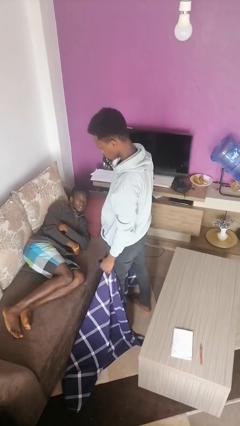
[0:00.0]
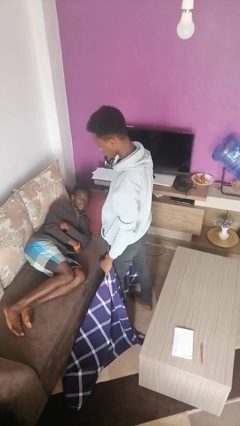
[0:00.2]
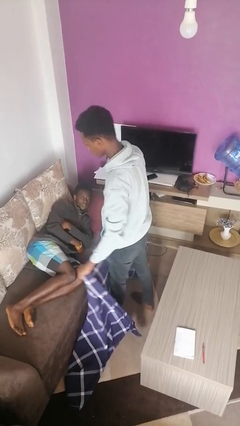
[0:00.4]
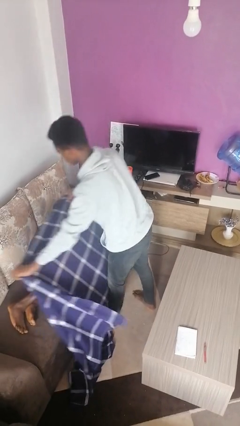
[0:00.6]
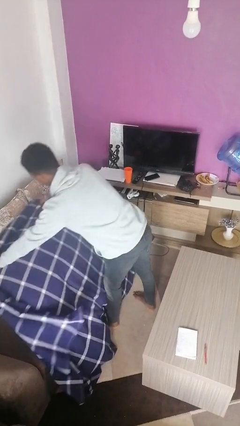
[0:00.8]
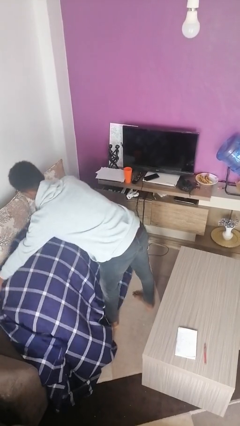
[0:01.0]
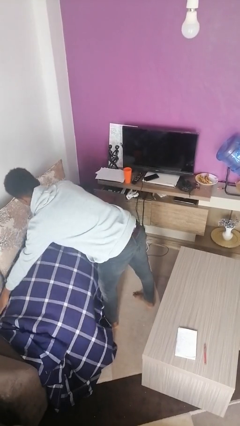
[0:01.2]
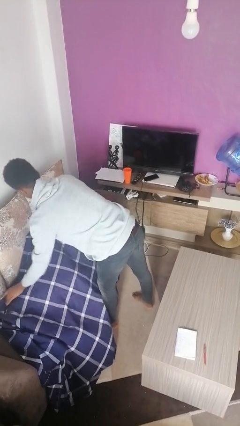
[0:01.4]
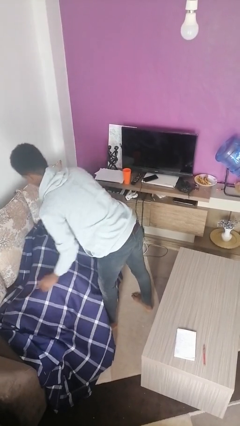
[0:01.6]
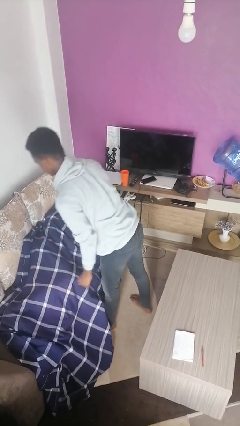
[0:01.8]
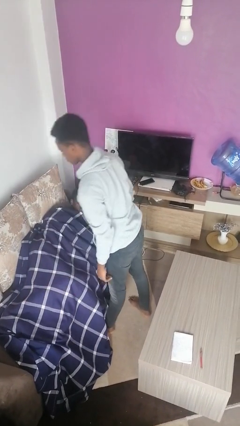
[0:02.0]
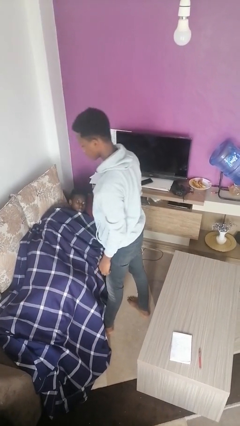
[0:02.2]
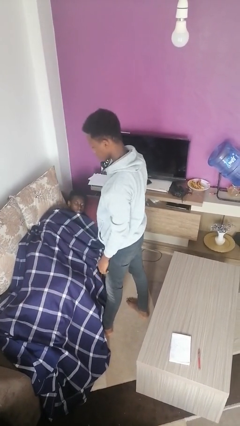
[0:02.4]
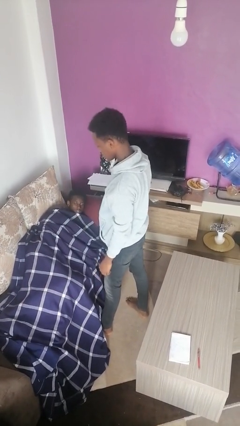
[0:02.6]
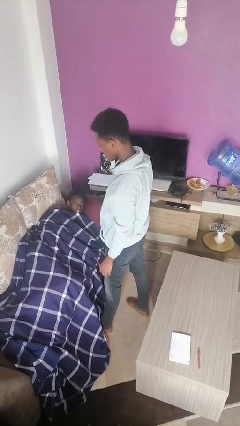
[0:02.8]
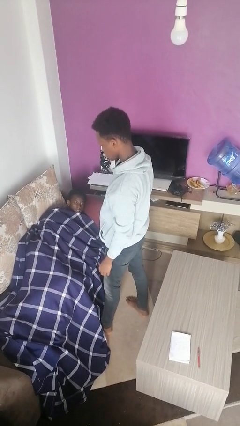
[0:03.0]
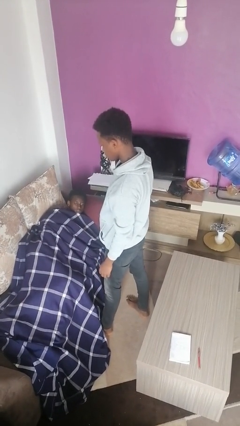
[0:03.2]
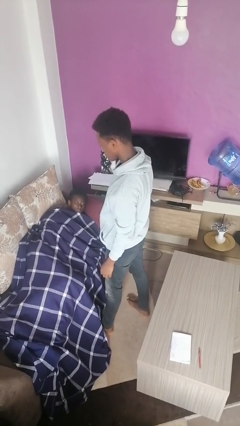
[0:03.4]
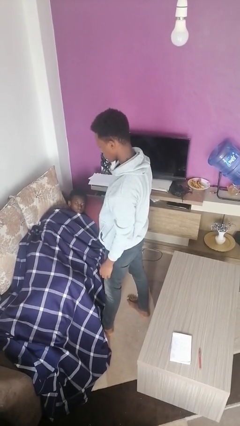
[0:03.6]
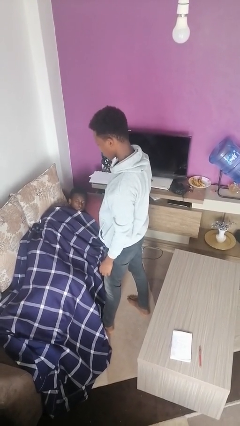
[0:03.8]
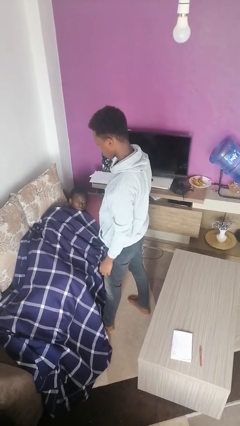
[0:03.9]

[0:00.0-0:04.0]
person covers friend with blanket

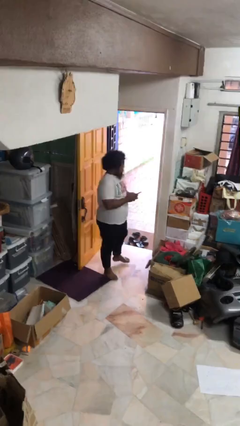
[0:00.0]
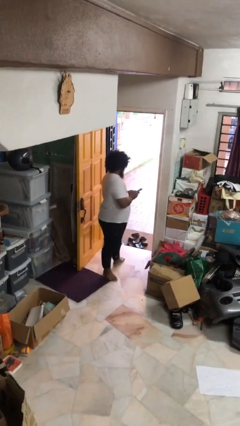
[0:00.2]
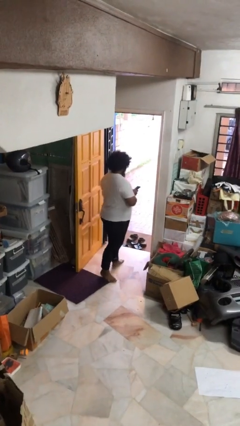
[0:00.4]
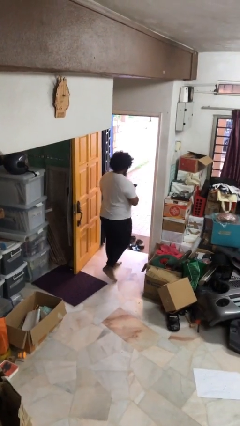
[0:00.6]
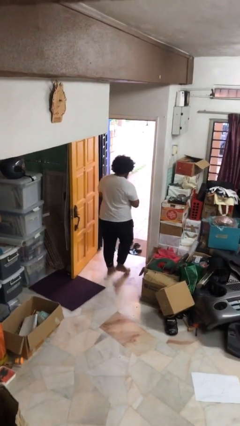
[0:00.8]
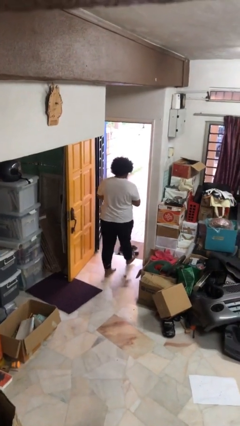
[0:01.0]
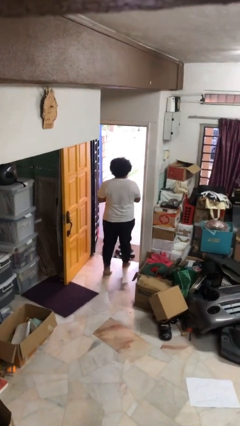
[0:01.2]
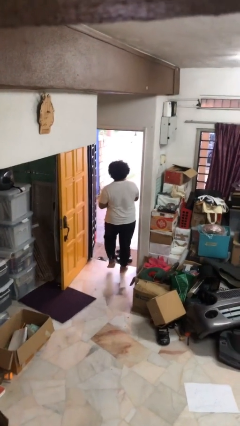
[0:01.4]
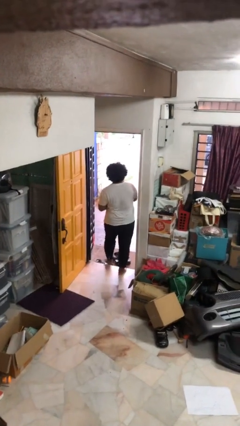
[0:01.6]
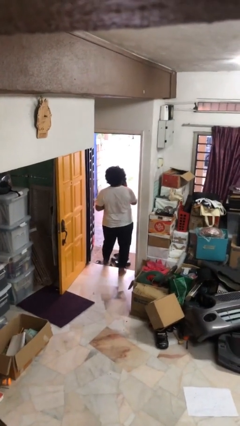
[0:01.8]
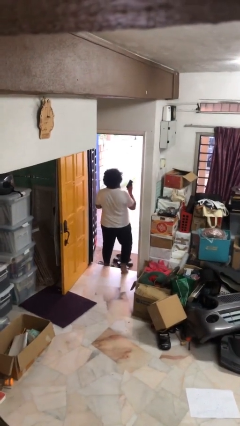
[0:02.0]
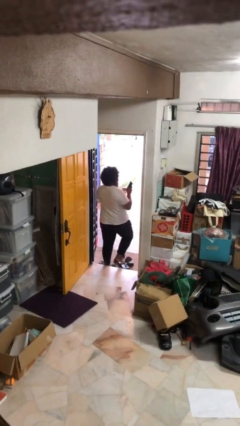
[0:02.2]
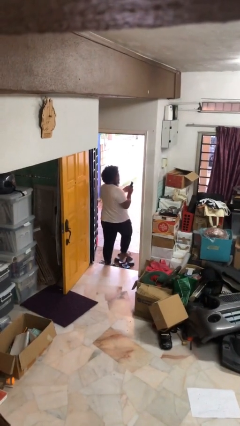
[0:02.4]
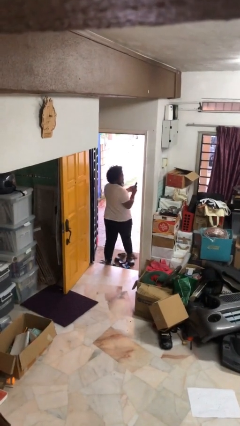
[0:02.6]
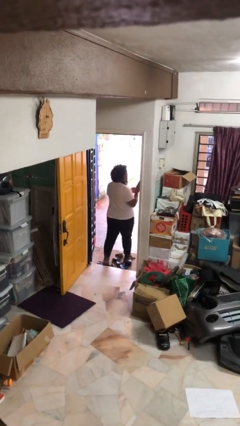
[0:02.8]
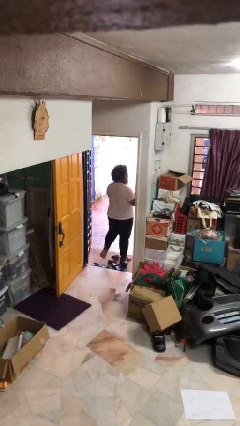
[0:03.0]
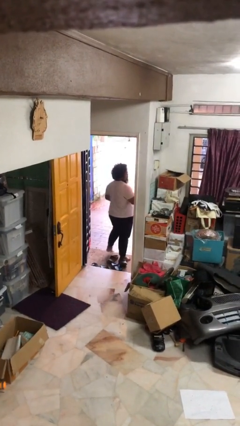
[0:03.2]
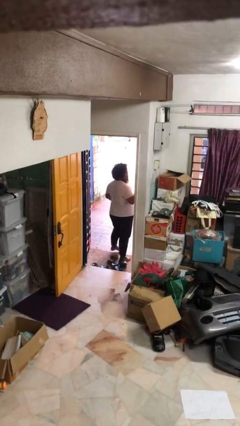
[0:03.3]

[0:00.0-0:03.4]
person exits scene through structure

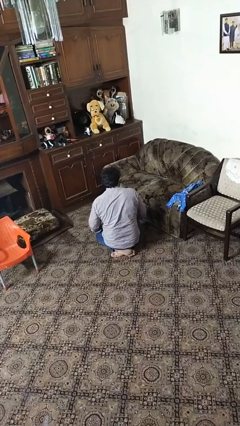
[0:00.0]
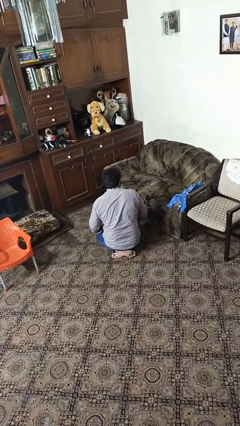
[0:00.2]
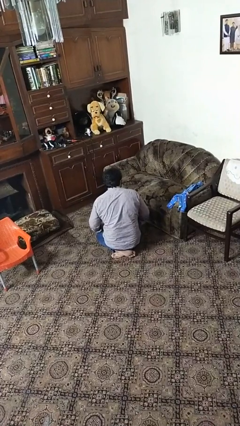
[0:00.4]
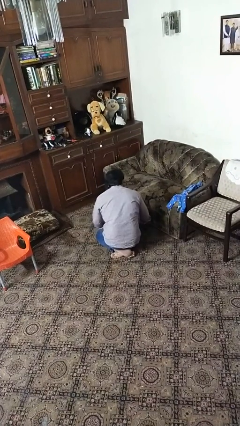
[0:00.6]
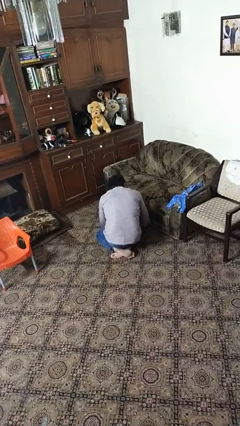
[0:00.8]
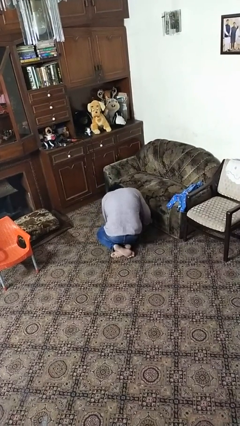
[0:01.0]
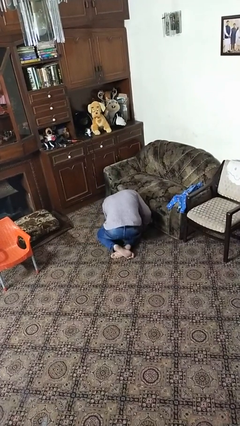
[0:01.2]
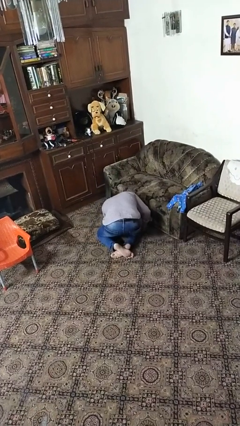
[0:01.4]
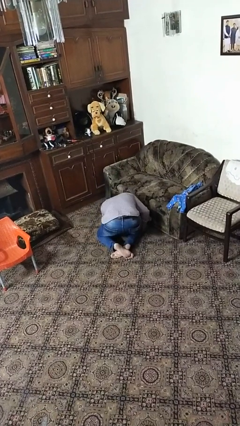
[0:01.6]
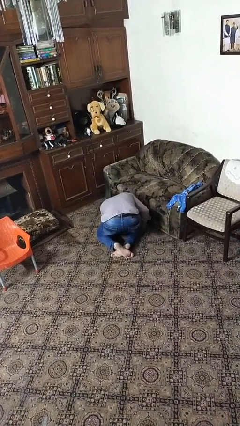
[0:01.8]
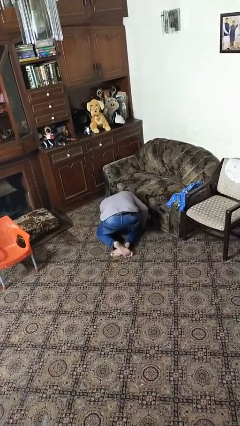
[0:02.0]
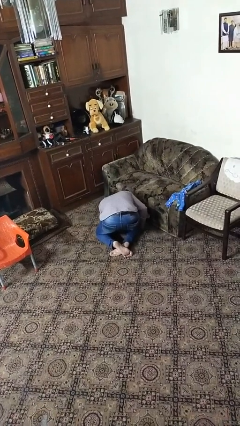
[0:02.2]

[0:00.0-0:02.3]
person searches under couch

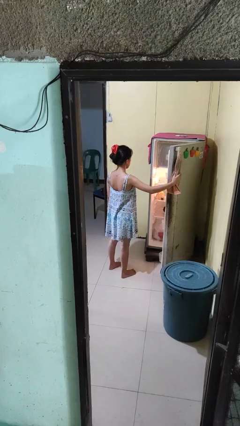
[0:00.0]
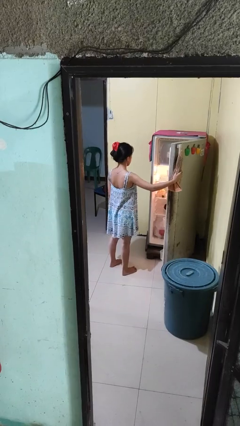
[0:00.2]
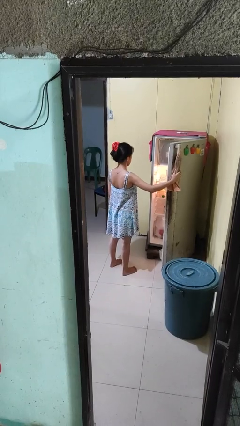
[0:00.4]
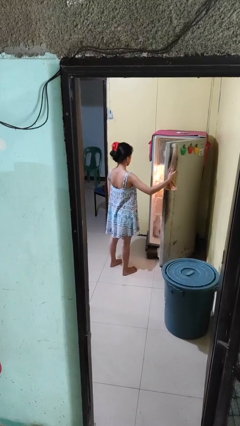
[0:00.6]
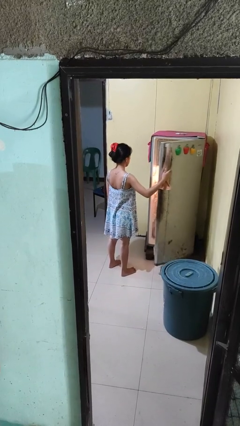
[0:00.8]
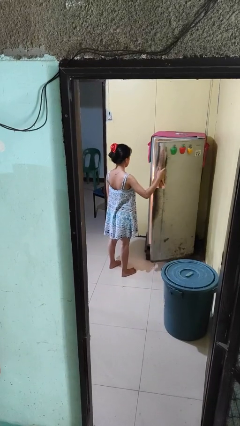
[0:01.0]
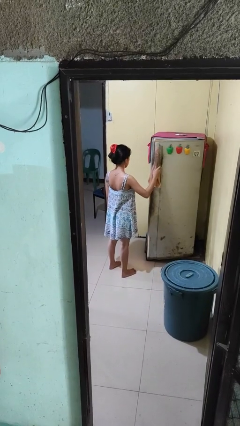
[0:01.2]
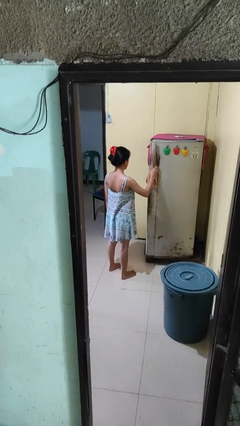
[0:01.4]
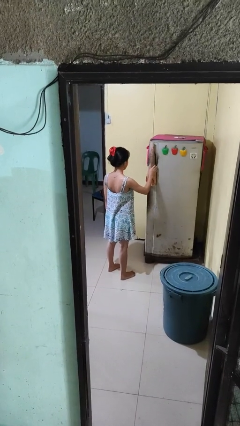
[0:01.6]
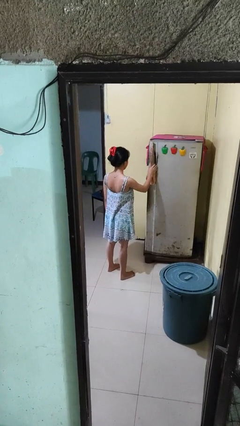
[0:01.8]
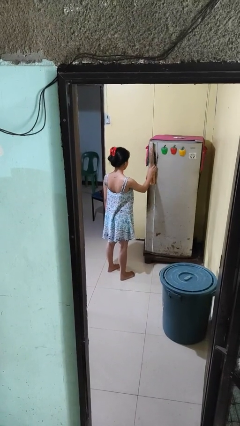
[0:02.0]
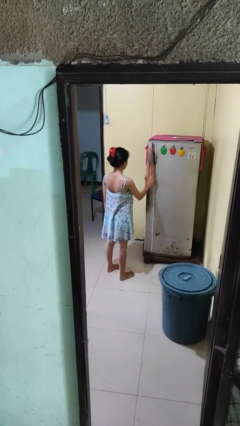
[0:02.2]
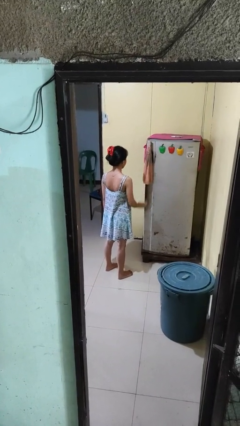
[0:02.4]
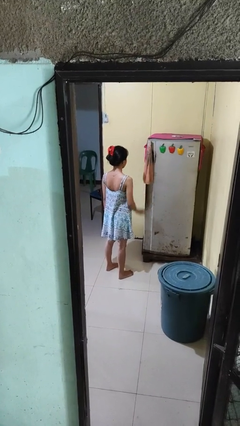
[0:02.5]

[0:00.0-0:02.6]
person closes refrigerator

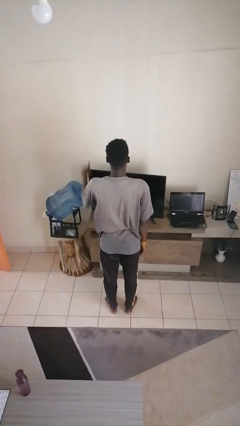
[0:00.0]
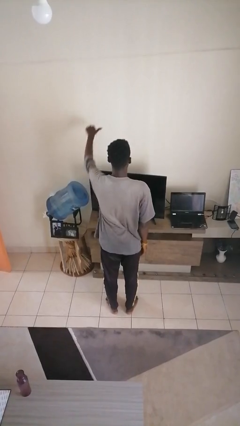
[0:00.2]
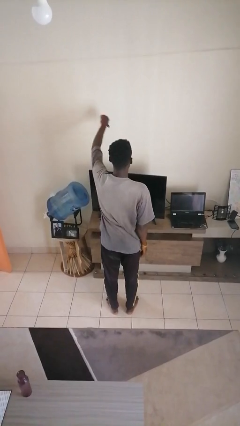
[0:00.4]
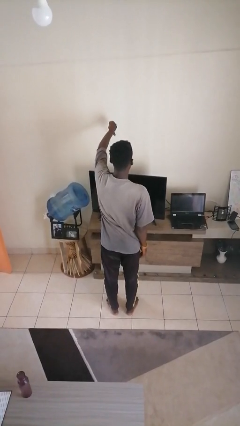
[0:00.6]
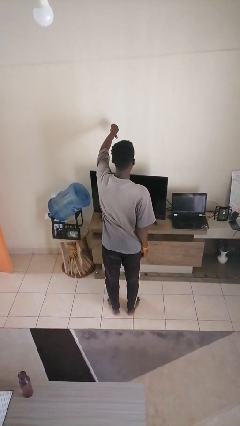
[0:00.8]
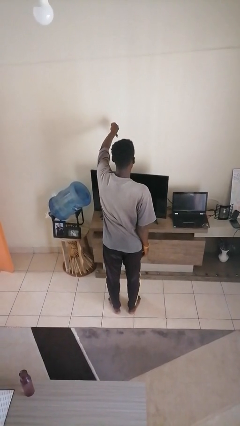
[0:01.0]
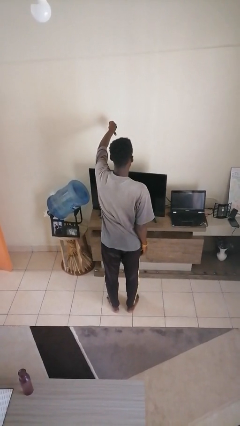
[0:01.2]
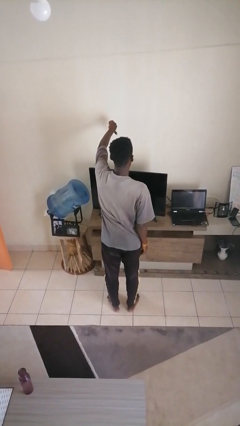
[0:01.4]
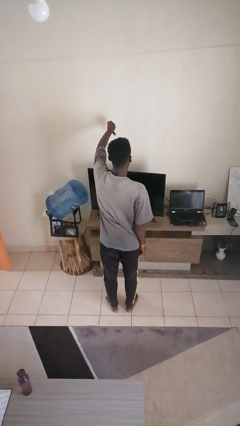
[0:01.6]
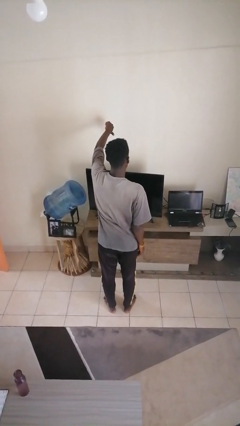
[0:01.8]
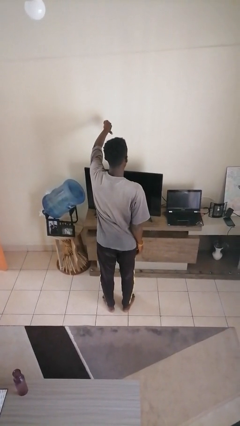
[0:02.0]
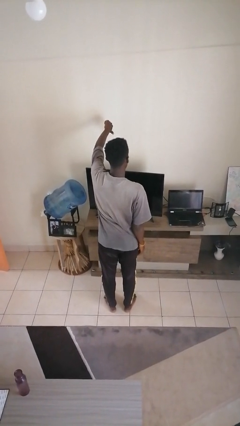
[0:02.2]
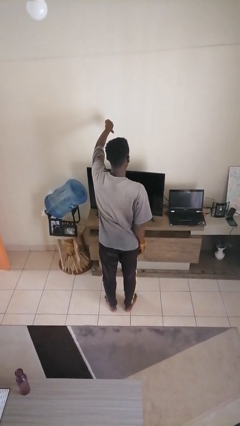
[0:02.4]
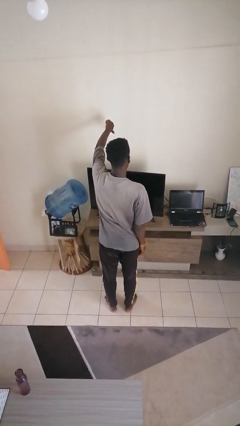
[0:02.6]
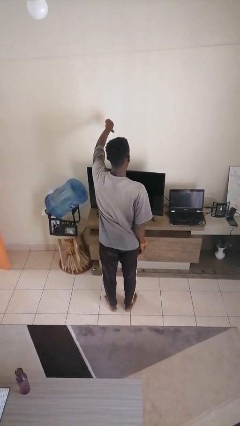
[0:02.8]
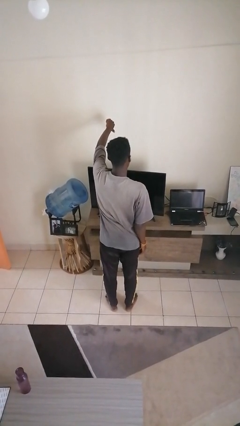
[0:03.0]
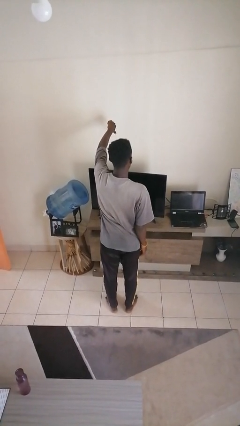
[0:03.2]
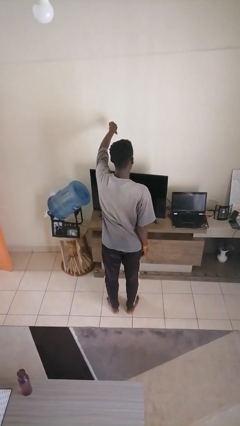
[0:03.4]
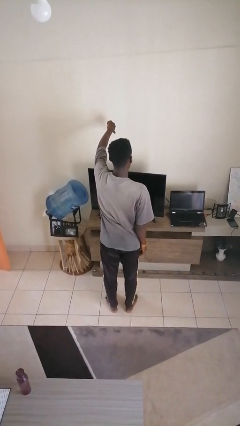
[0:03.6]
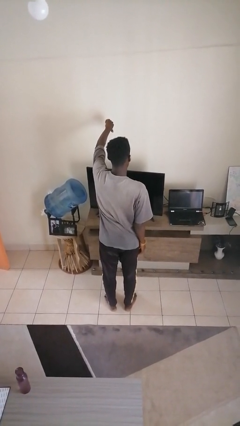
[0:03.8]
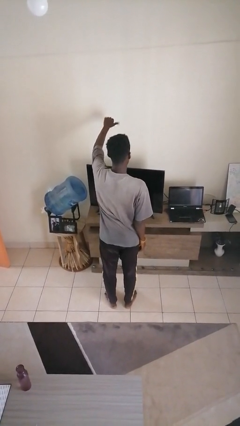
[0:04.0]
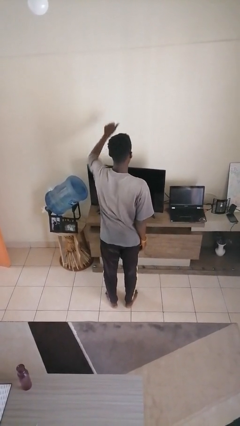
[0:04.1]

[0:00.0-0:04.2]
person gestures thumbs down

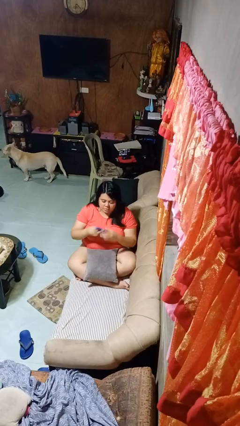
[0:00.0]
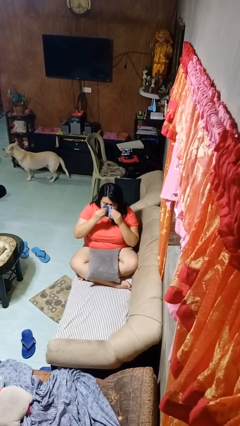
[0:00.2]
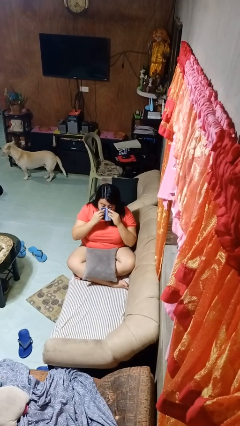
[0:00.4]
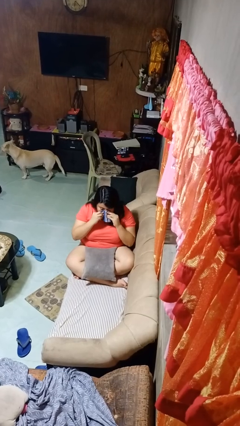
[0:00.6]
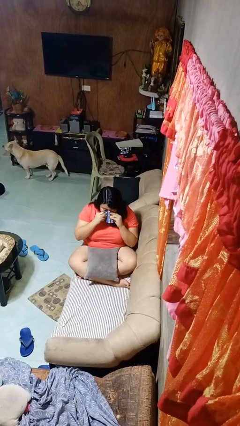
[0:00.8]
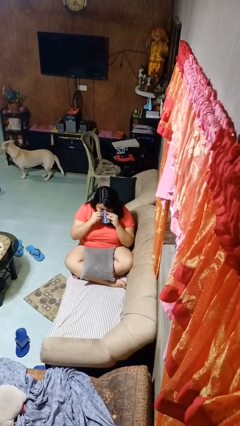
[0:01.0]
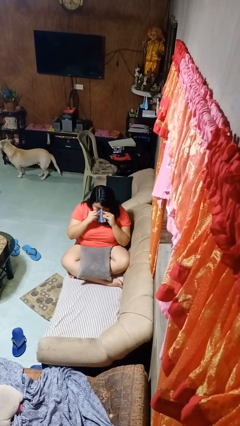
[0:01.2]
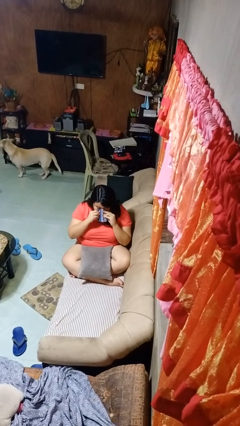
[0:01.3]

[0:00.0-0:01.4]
person blows nose
